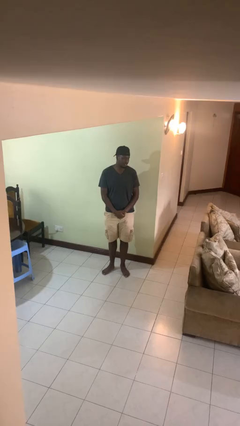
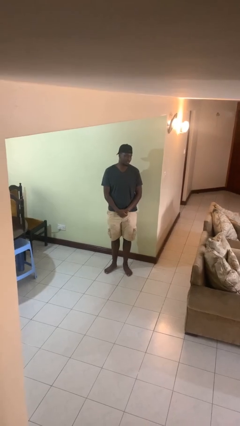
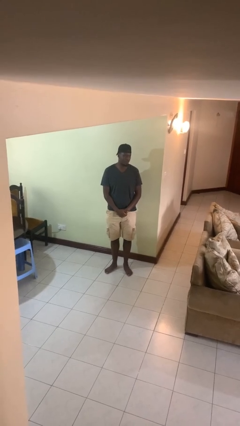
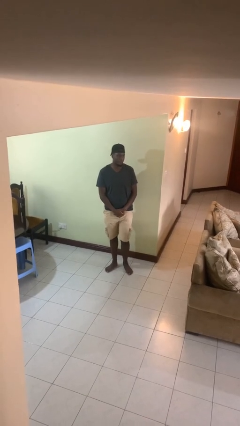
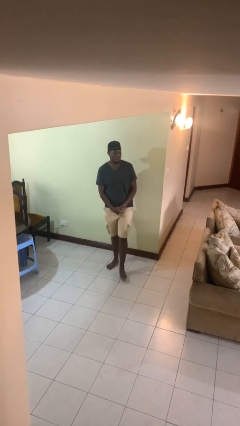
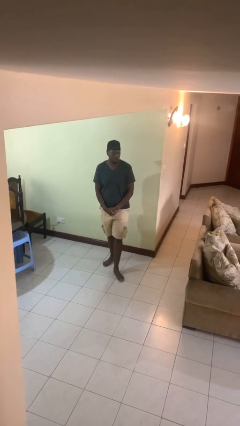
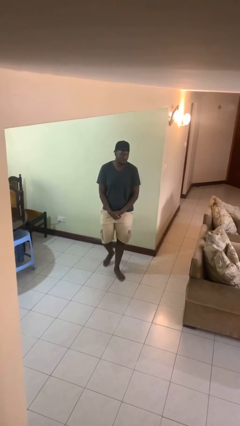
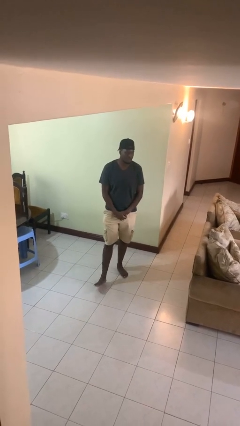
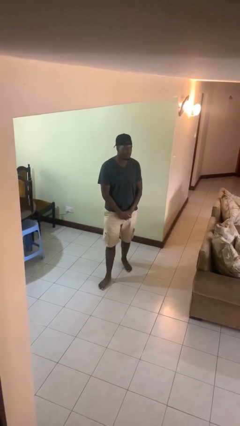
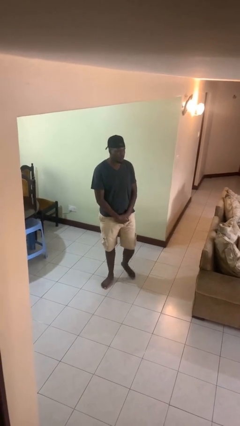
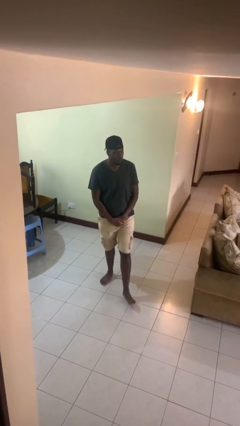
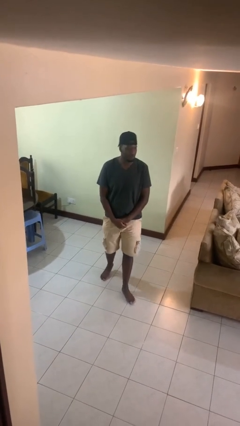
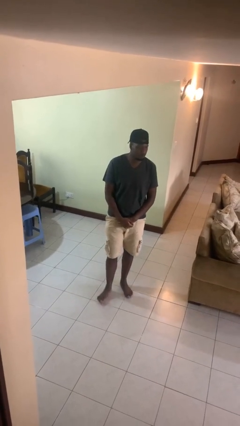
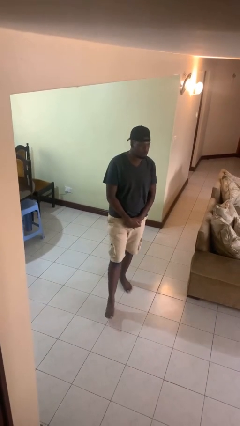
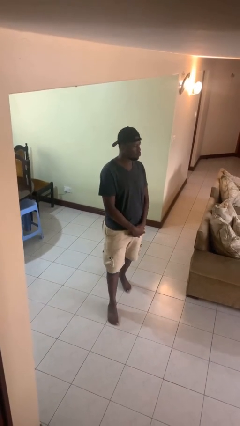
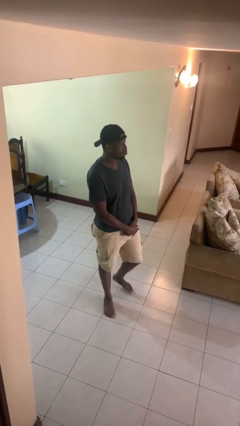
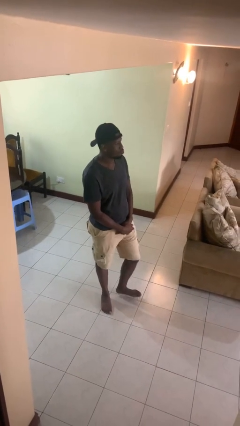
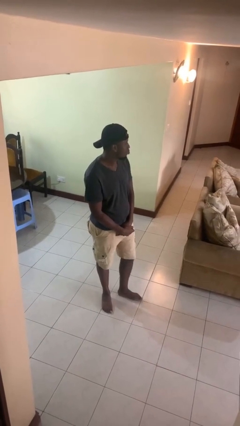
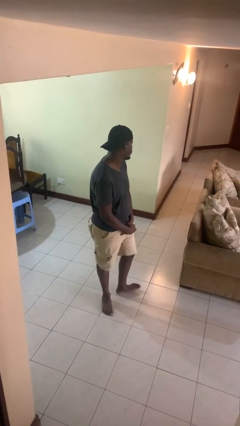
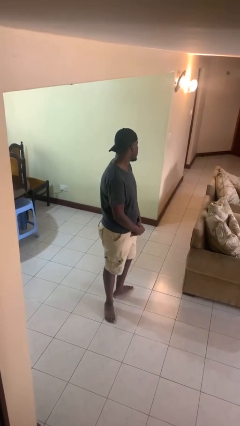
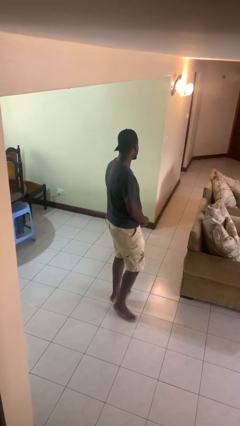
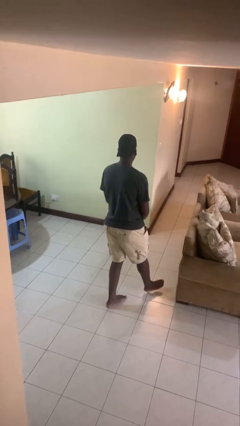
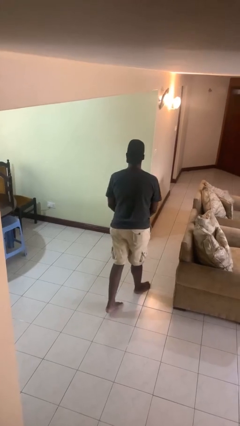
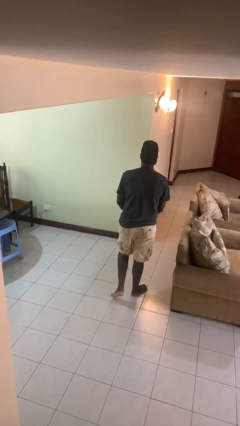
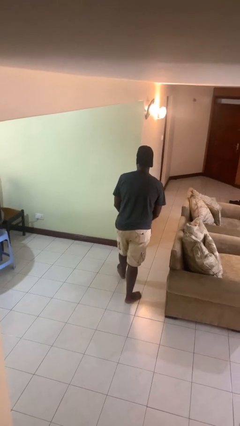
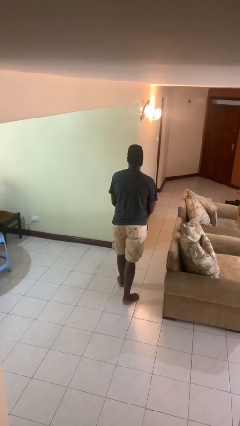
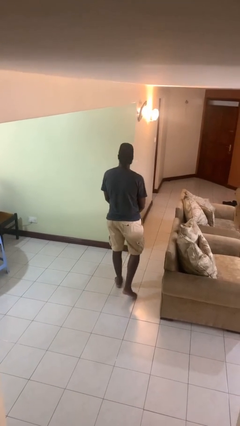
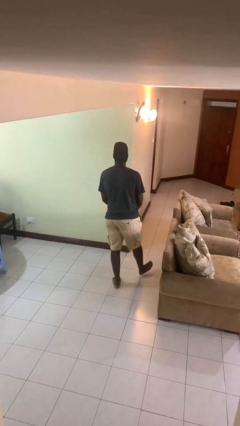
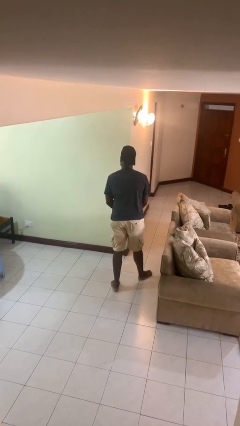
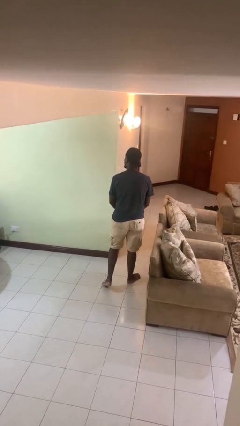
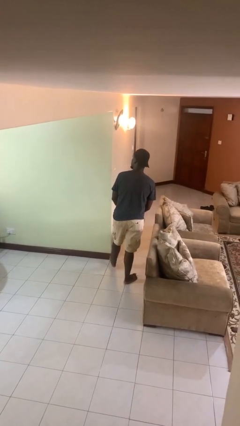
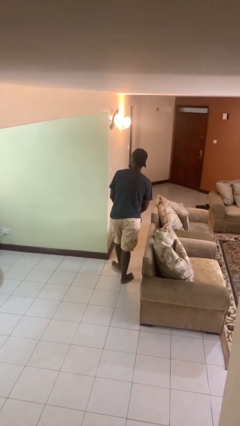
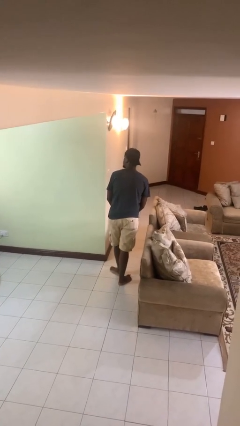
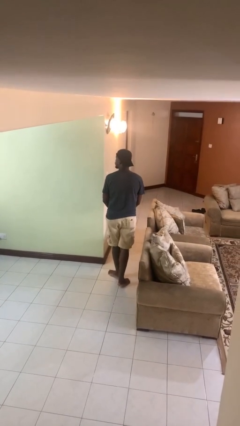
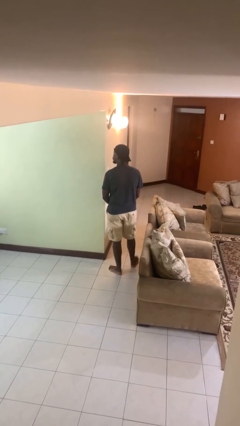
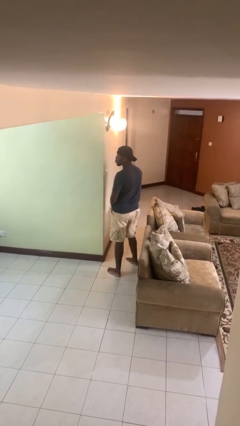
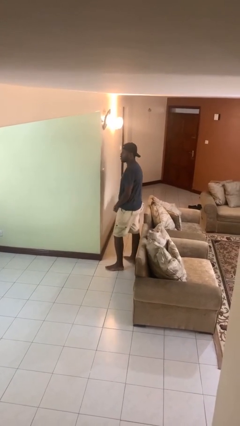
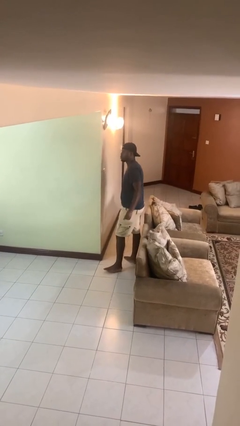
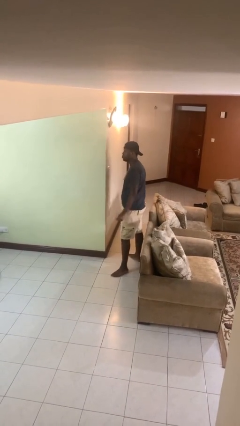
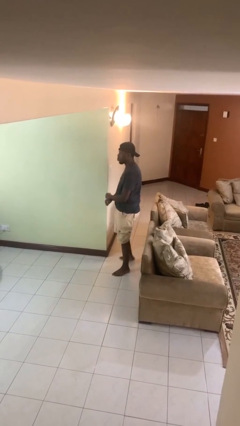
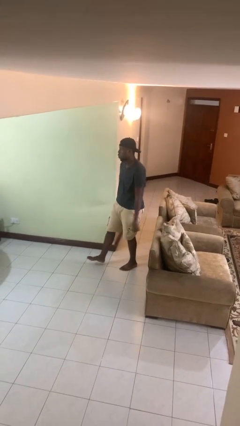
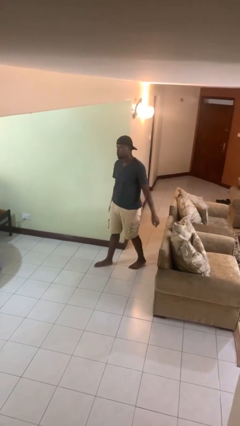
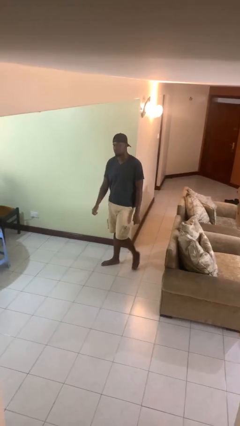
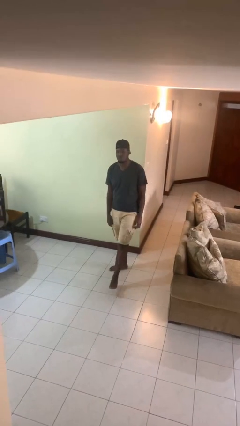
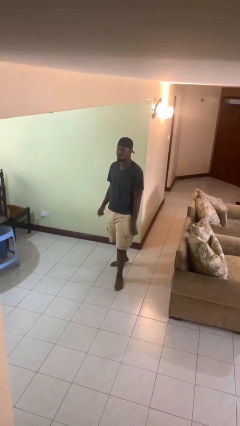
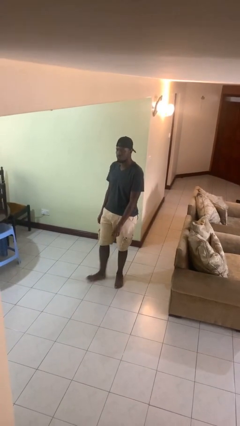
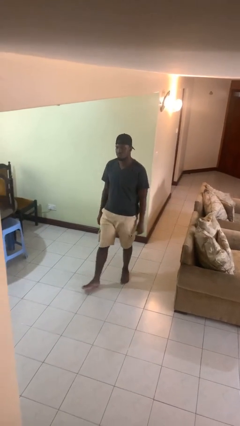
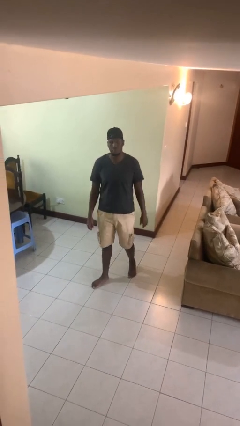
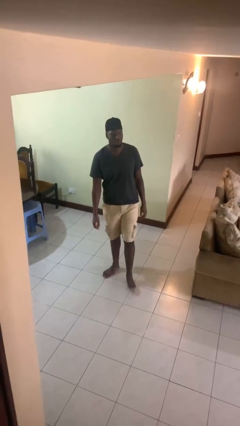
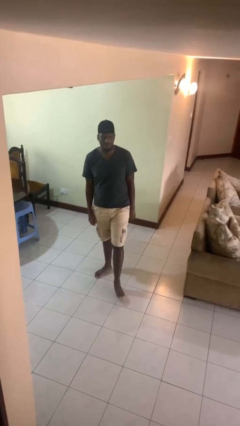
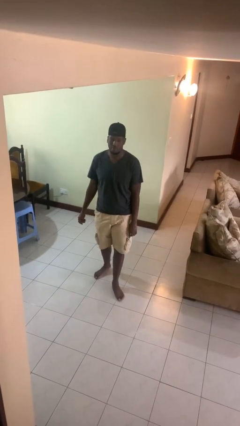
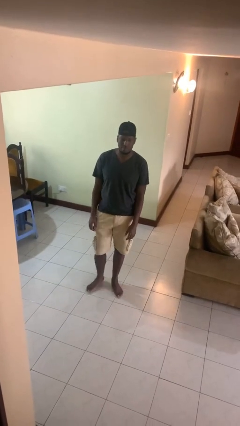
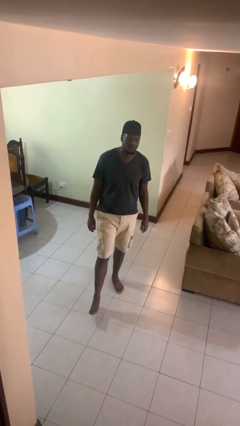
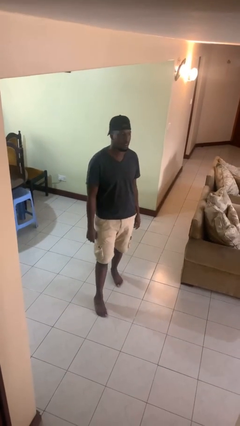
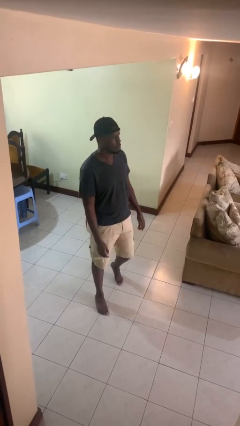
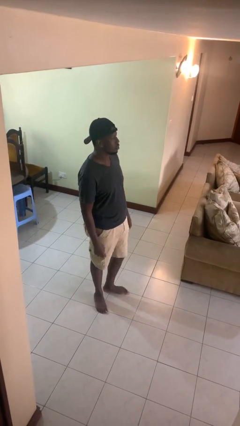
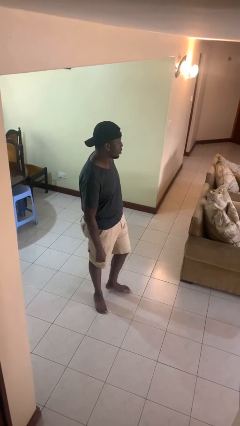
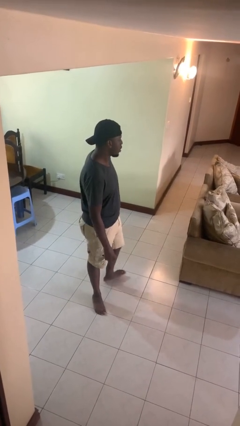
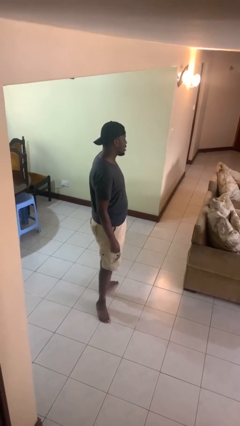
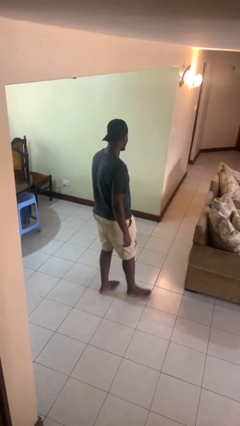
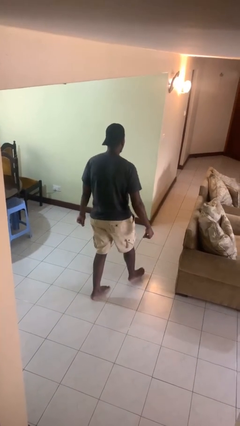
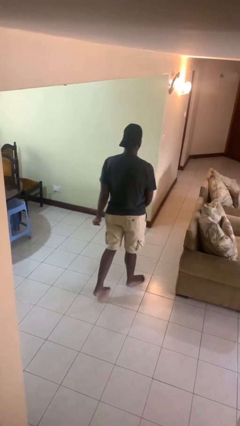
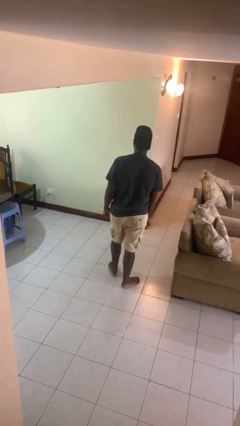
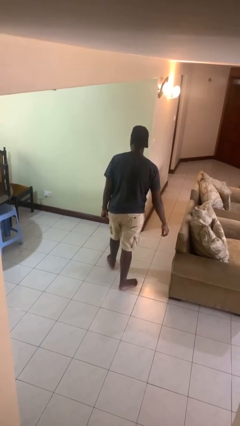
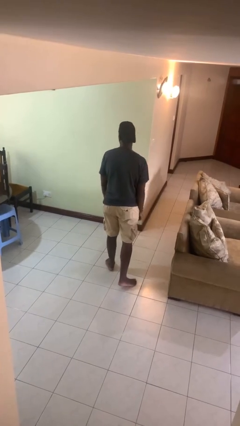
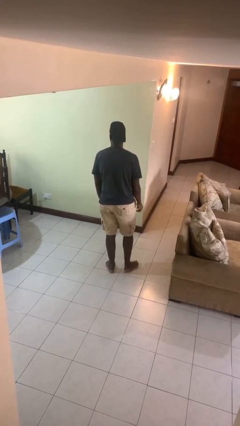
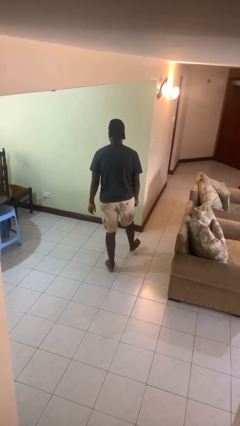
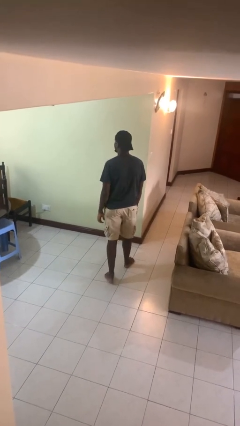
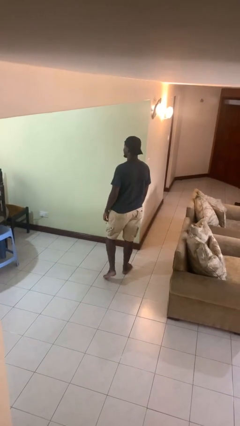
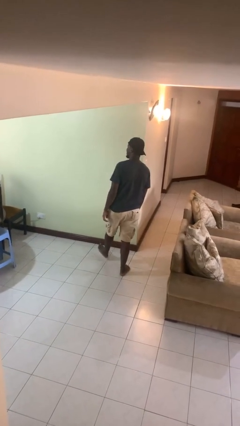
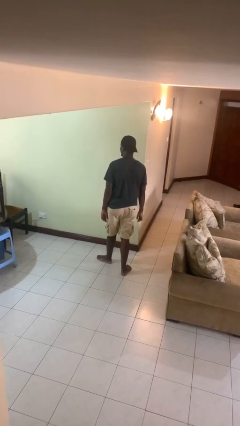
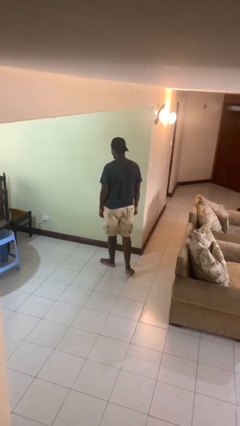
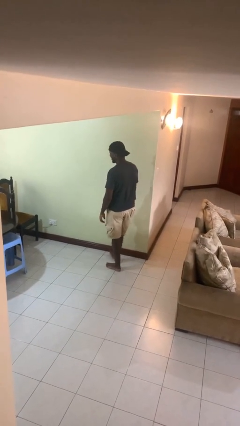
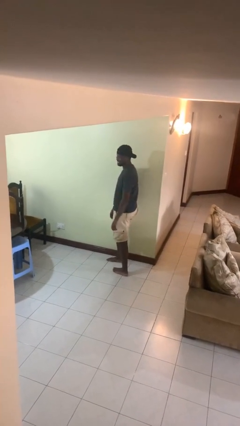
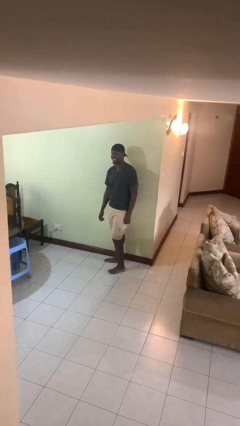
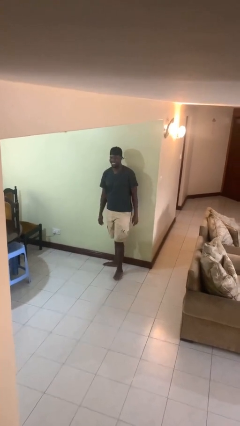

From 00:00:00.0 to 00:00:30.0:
person walks

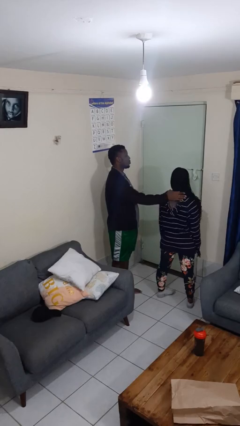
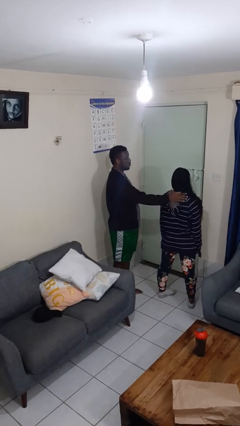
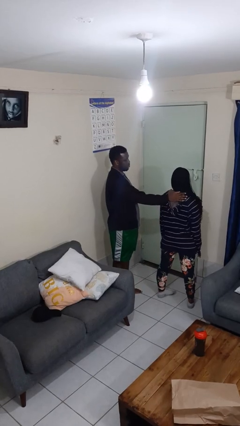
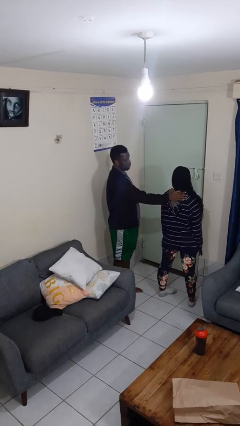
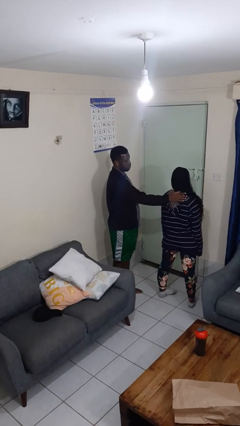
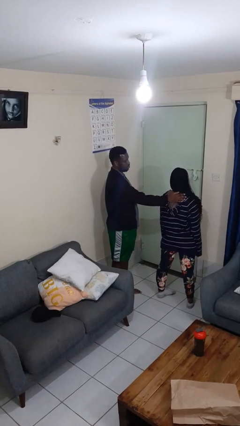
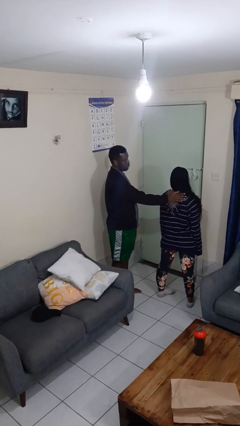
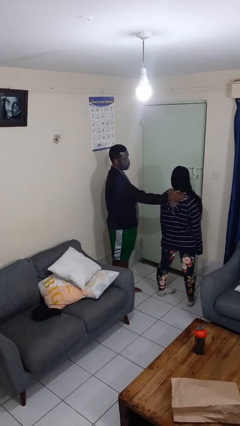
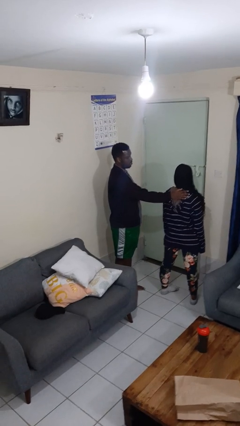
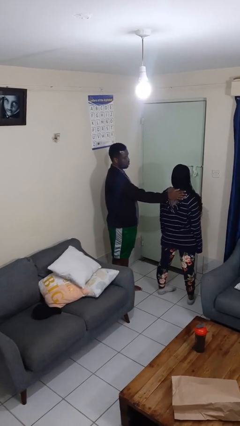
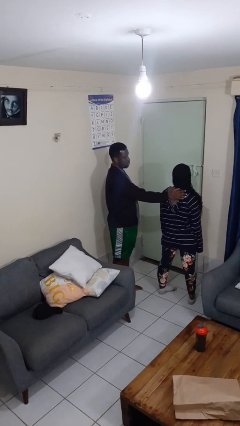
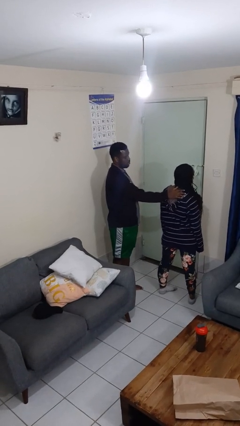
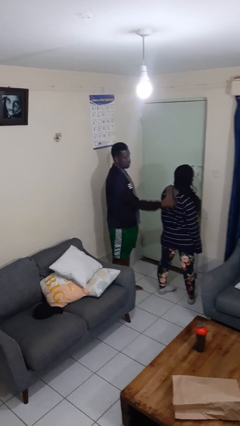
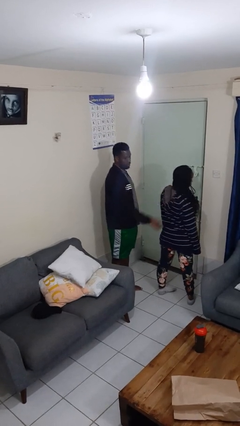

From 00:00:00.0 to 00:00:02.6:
person touches back of person

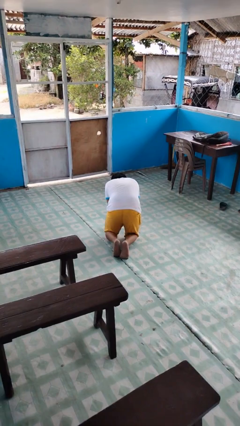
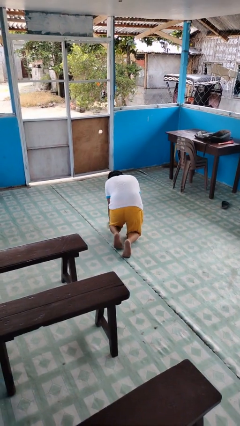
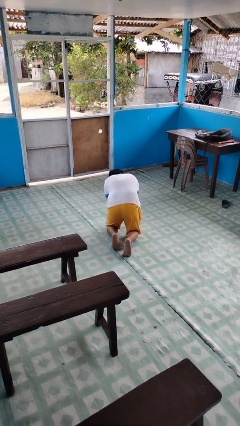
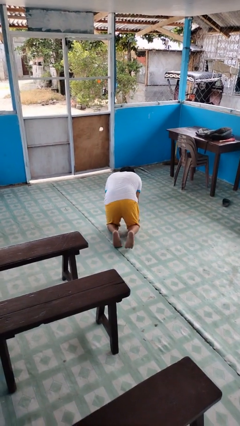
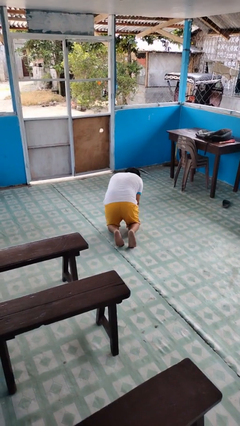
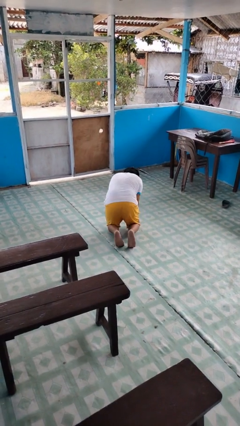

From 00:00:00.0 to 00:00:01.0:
person crawls
